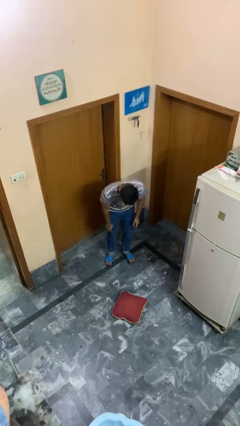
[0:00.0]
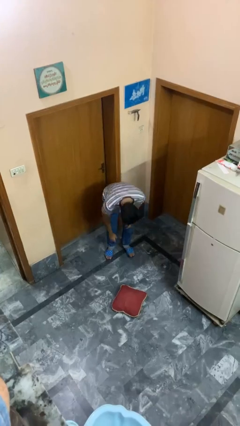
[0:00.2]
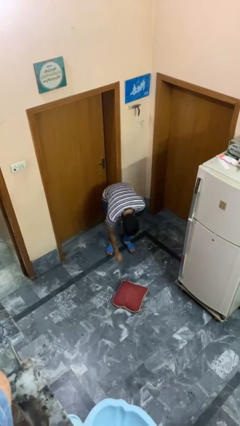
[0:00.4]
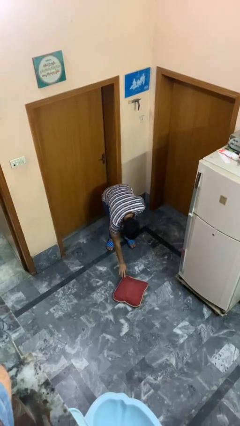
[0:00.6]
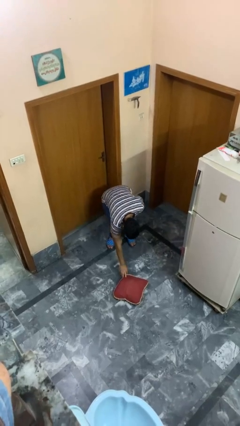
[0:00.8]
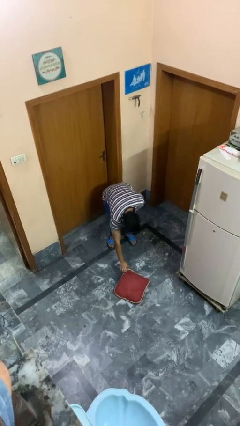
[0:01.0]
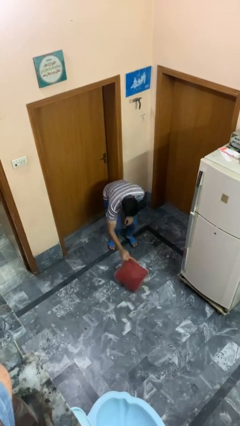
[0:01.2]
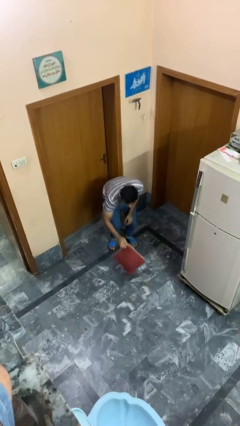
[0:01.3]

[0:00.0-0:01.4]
person picks up object from floor

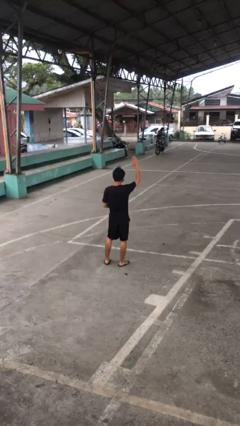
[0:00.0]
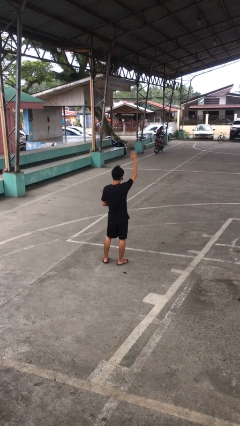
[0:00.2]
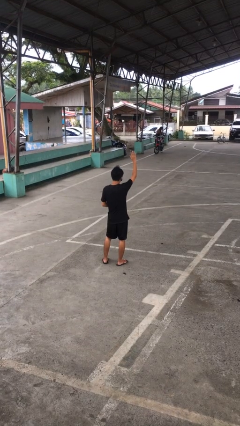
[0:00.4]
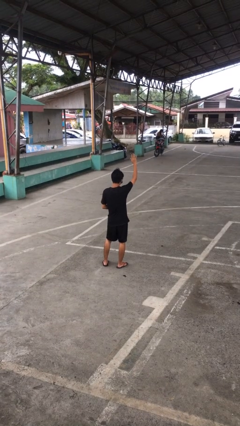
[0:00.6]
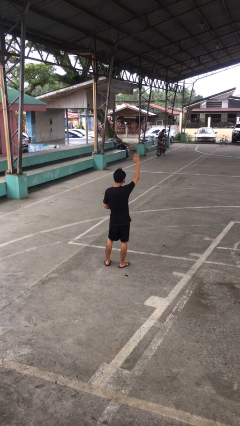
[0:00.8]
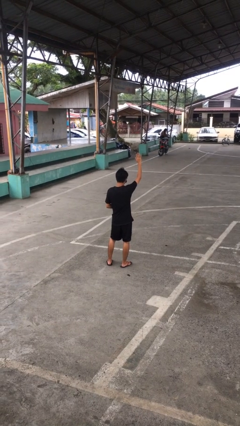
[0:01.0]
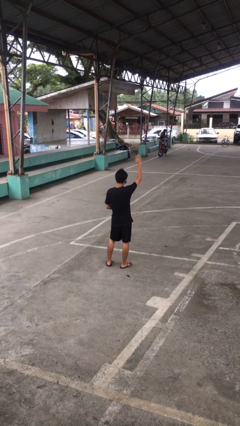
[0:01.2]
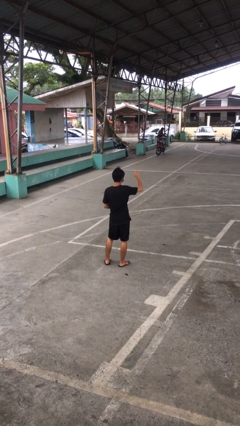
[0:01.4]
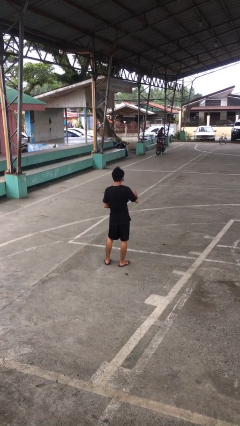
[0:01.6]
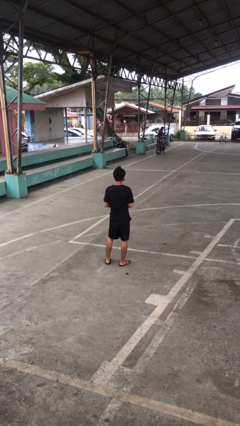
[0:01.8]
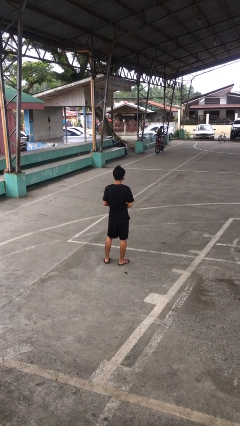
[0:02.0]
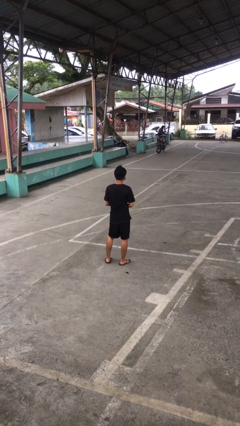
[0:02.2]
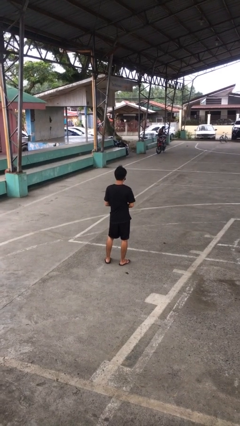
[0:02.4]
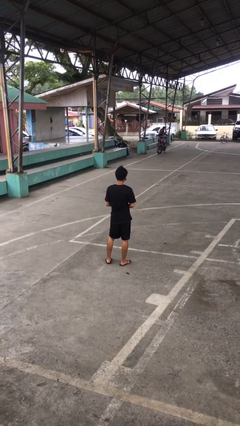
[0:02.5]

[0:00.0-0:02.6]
person gestures raise hand

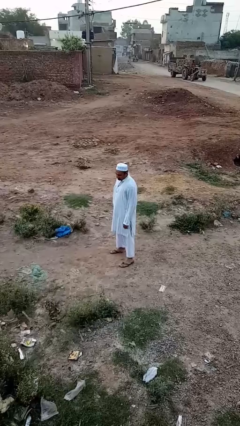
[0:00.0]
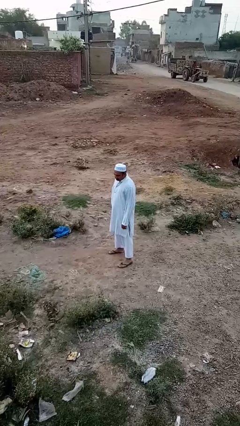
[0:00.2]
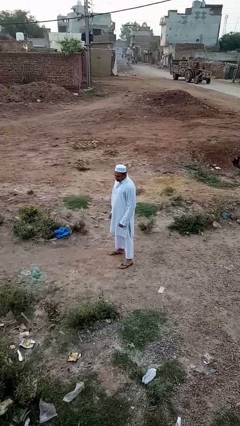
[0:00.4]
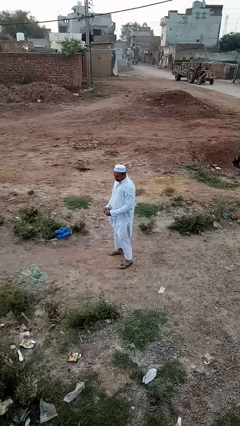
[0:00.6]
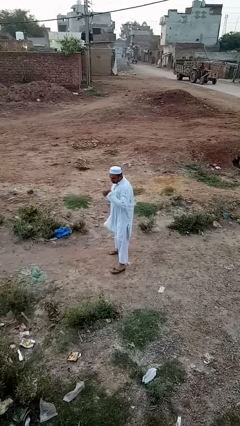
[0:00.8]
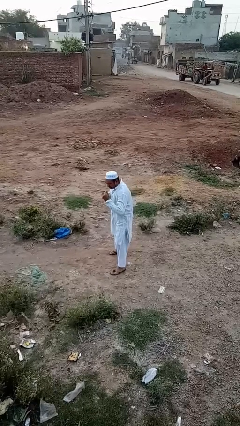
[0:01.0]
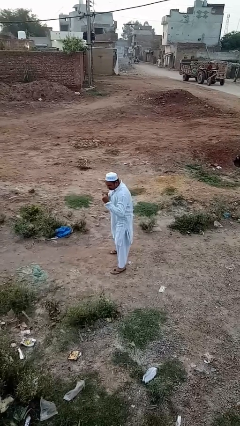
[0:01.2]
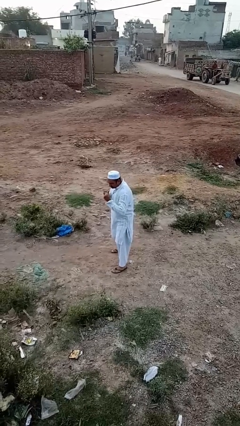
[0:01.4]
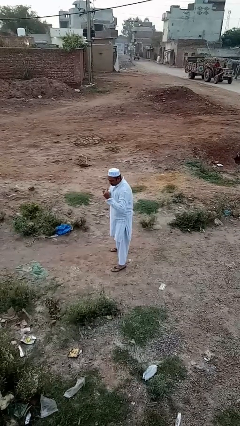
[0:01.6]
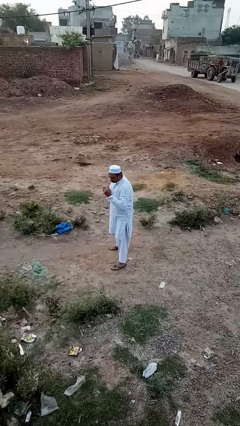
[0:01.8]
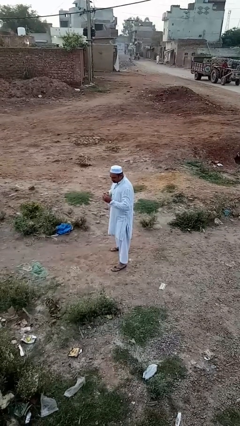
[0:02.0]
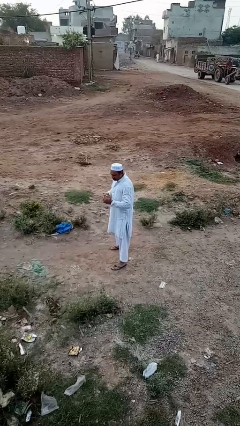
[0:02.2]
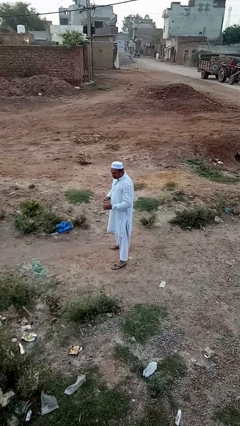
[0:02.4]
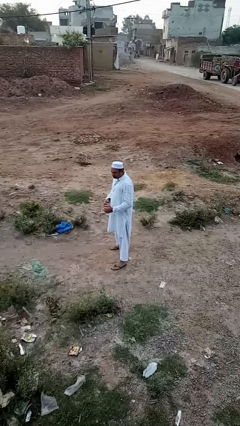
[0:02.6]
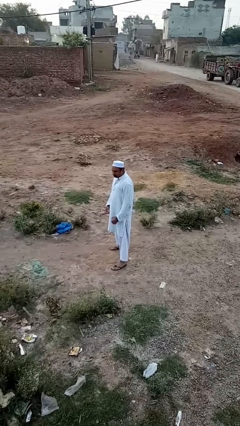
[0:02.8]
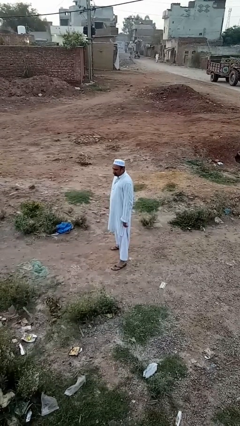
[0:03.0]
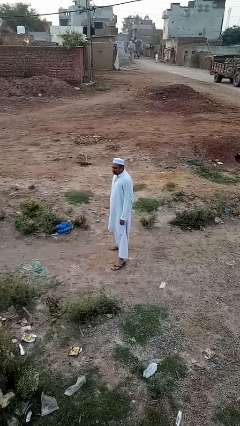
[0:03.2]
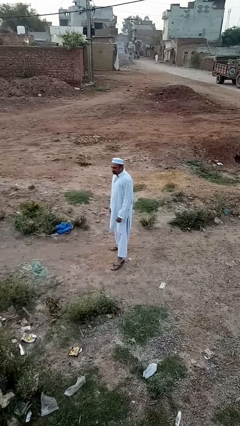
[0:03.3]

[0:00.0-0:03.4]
person karate chop

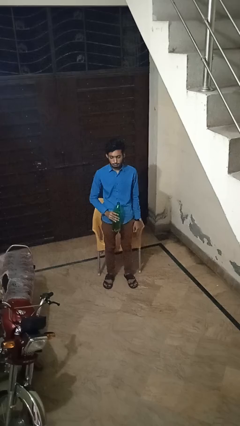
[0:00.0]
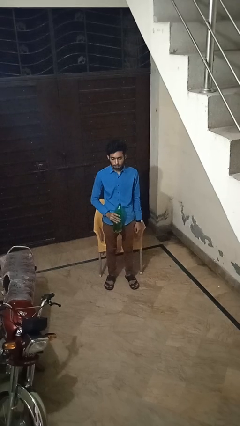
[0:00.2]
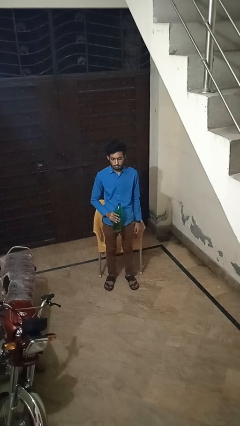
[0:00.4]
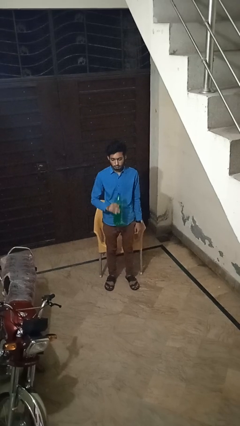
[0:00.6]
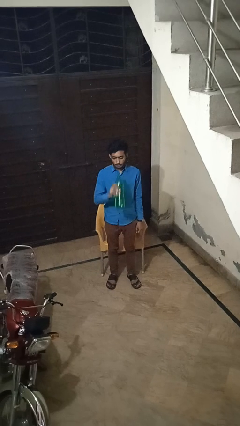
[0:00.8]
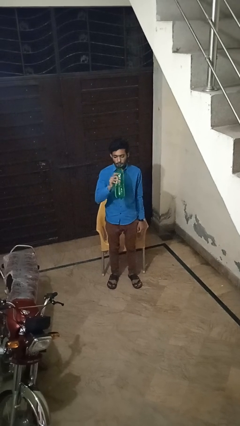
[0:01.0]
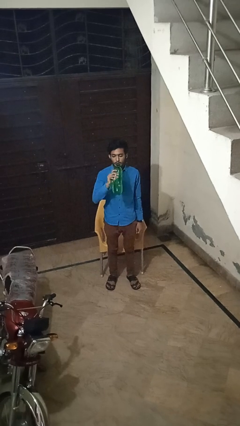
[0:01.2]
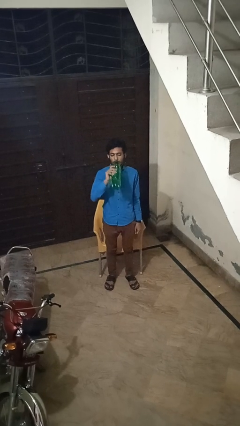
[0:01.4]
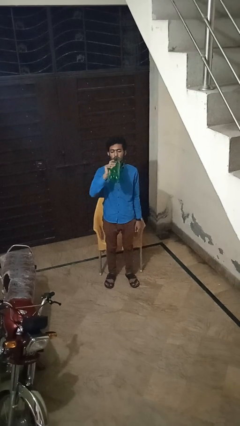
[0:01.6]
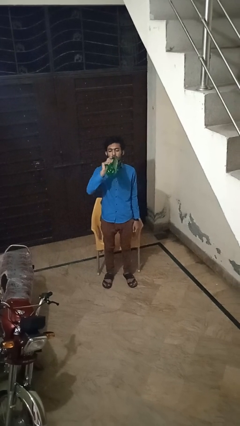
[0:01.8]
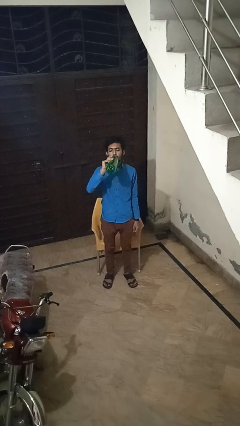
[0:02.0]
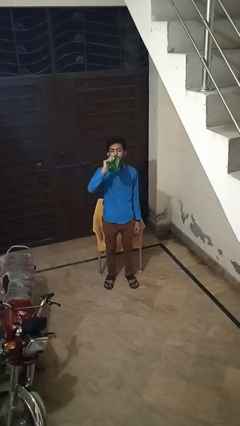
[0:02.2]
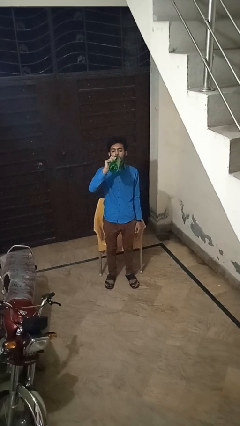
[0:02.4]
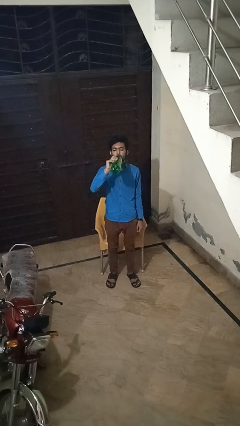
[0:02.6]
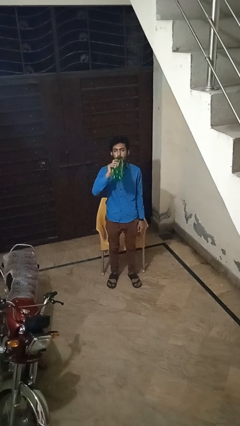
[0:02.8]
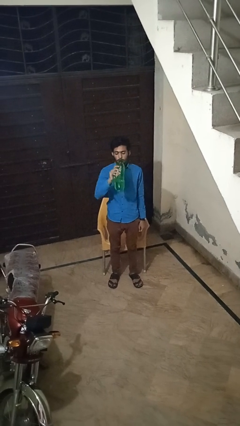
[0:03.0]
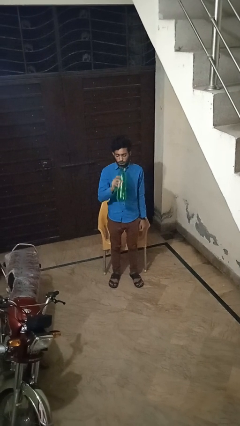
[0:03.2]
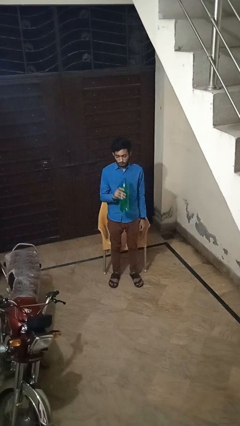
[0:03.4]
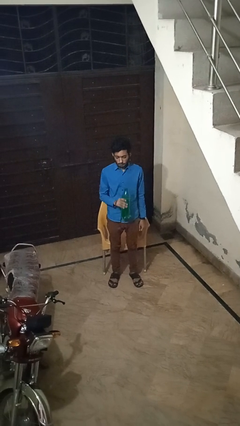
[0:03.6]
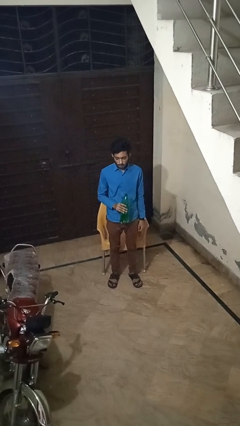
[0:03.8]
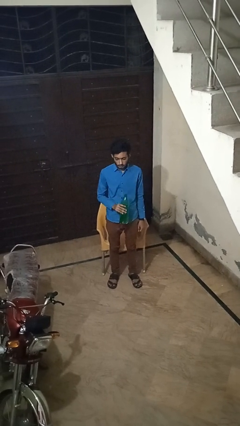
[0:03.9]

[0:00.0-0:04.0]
person drinks from bottle

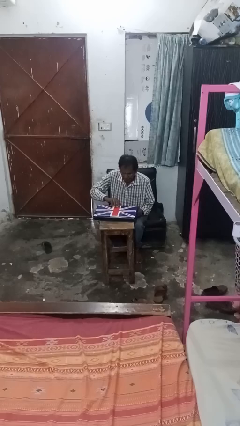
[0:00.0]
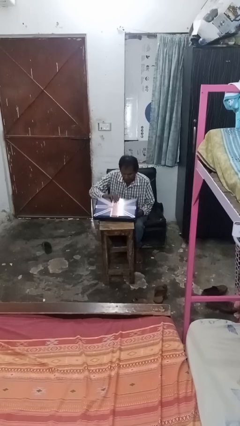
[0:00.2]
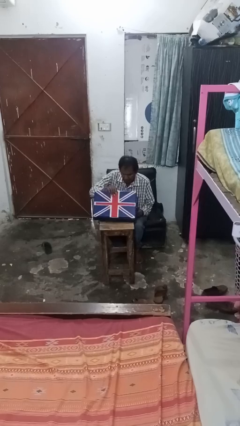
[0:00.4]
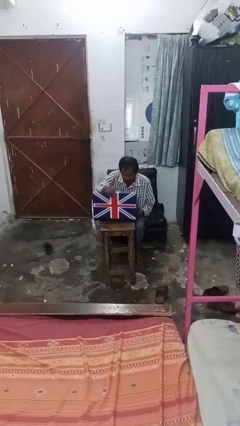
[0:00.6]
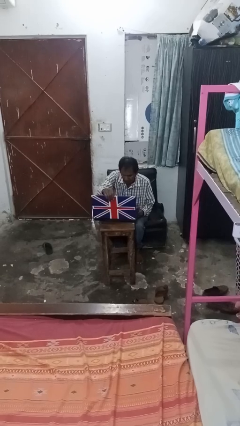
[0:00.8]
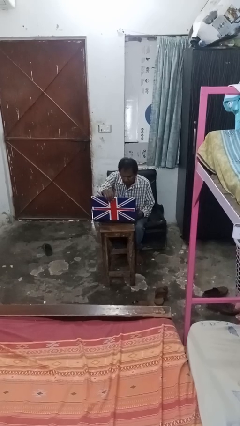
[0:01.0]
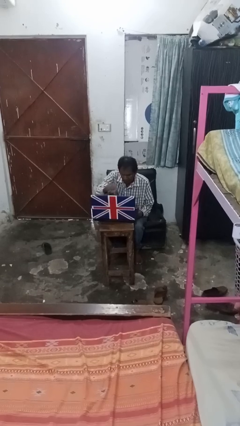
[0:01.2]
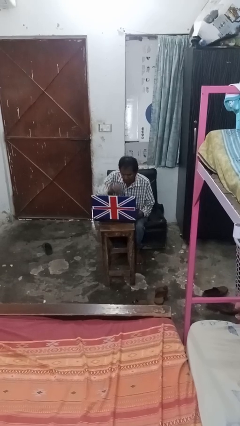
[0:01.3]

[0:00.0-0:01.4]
person opens laptop

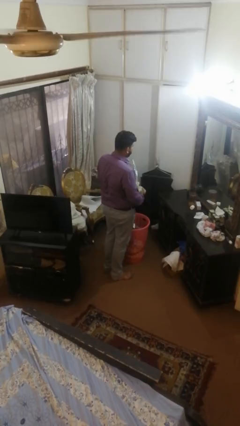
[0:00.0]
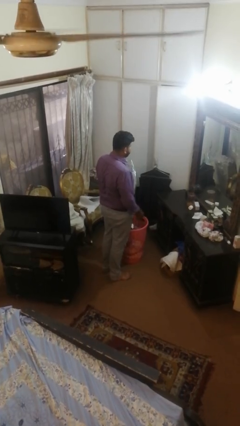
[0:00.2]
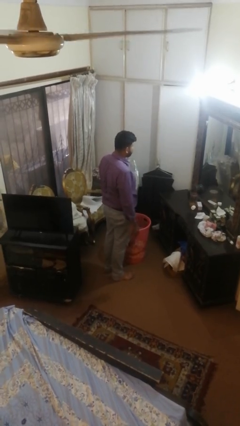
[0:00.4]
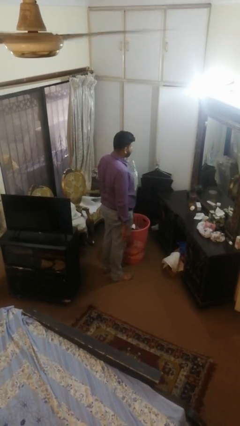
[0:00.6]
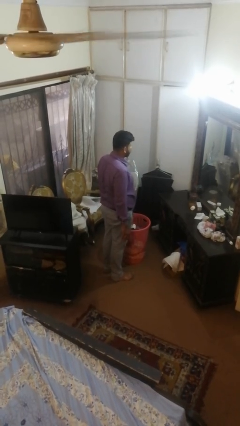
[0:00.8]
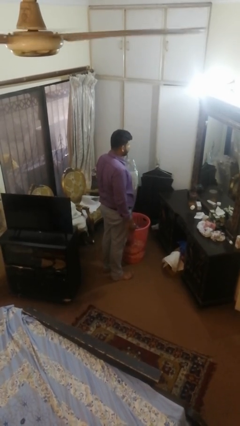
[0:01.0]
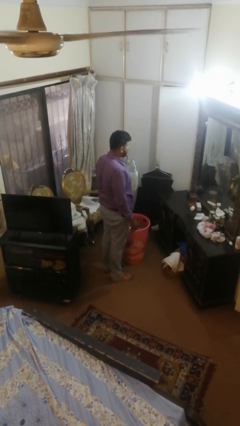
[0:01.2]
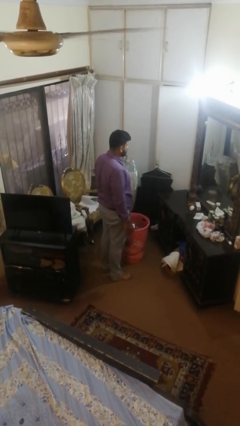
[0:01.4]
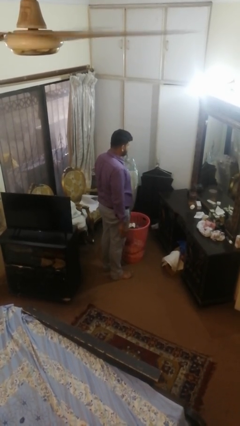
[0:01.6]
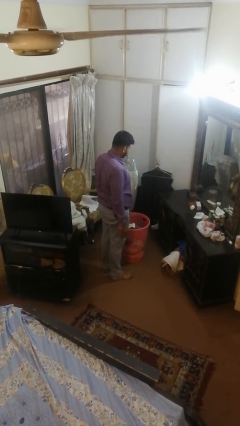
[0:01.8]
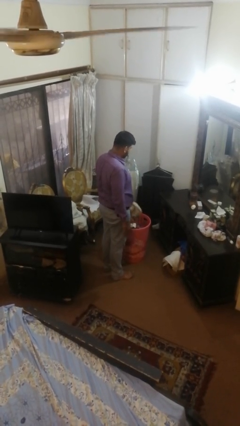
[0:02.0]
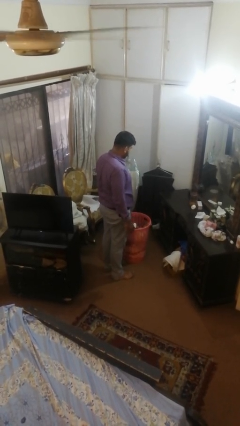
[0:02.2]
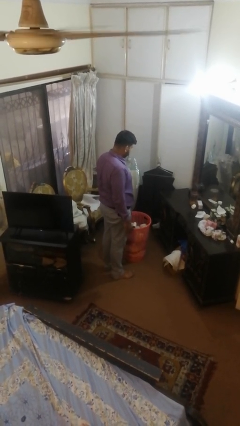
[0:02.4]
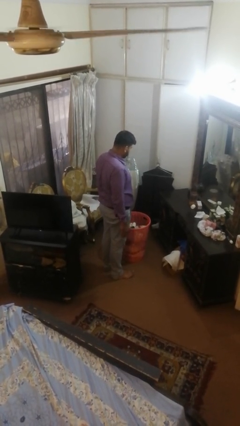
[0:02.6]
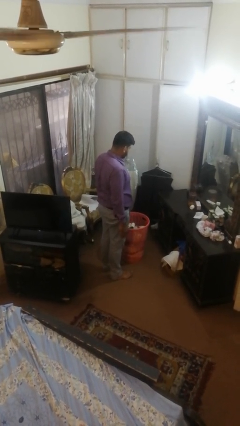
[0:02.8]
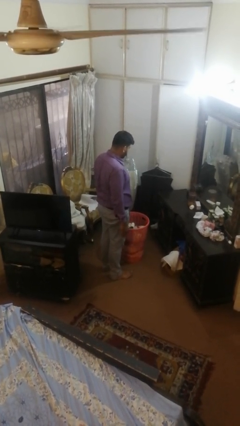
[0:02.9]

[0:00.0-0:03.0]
person puts object into basket

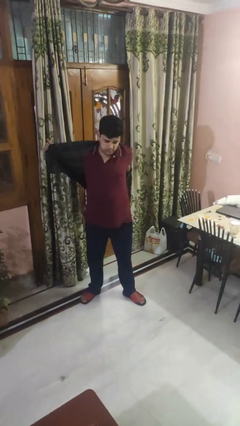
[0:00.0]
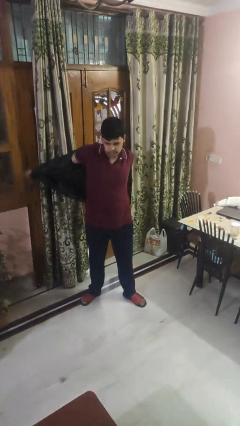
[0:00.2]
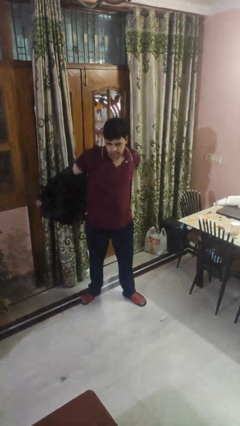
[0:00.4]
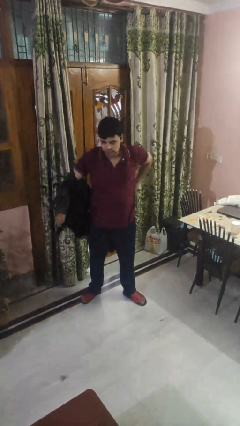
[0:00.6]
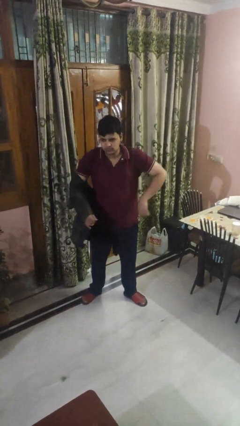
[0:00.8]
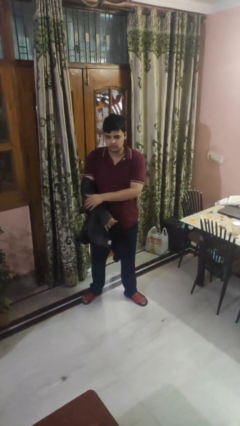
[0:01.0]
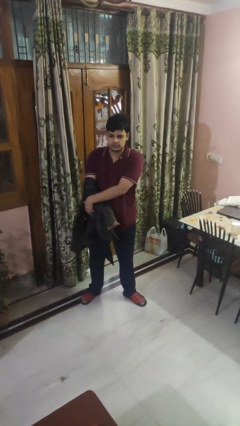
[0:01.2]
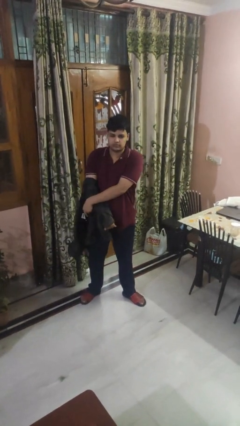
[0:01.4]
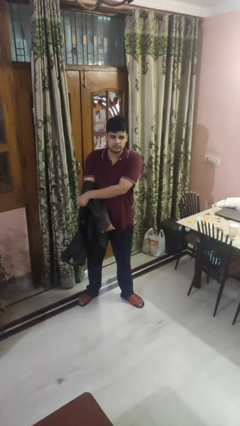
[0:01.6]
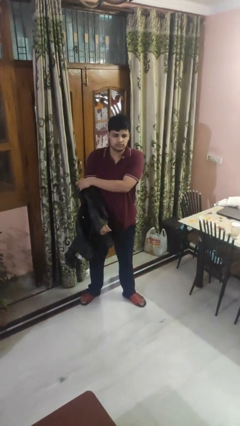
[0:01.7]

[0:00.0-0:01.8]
person takes off shirt
